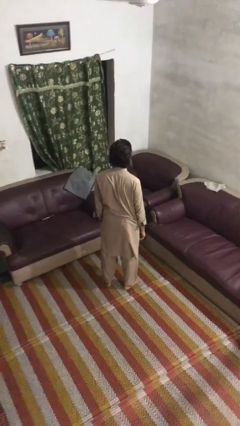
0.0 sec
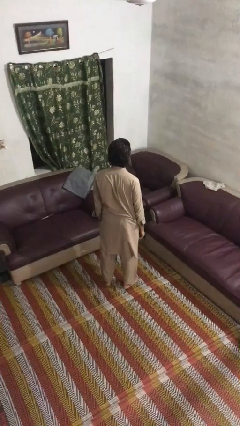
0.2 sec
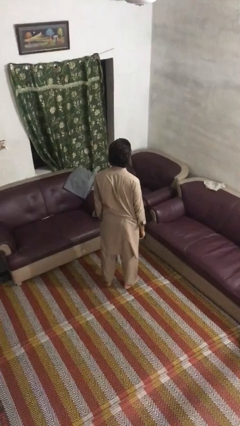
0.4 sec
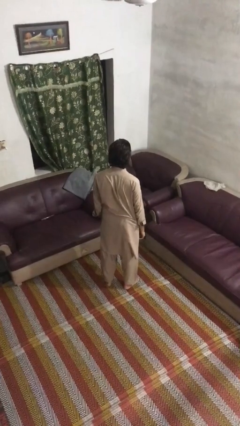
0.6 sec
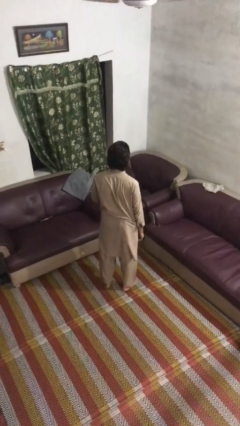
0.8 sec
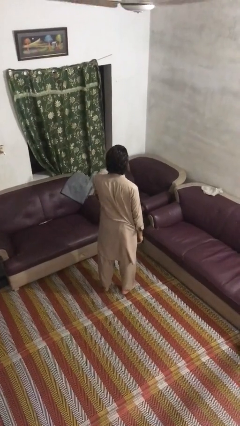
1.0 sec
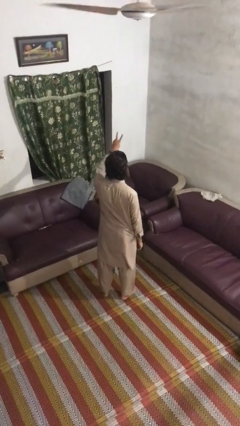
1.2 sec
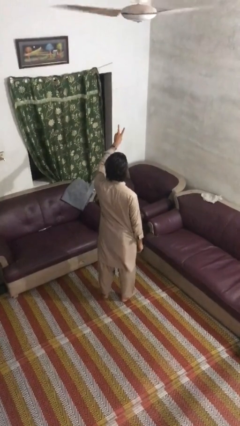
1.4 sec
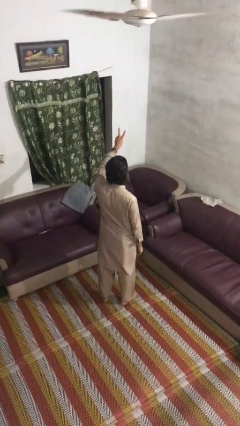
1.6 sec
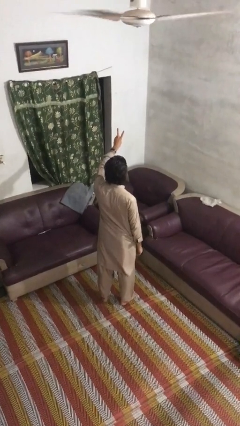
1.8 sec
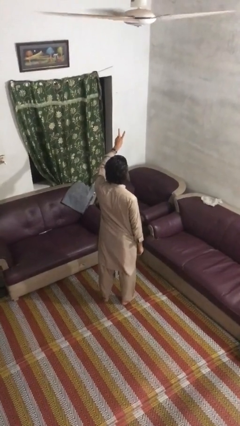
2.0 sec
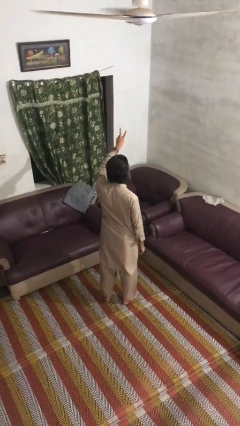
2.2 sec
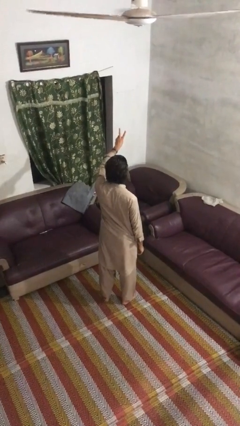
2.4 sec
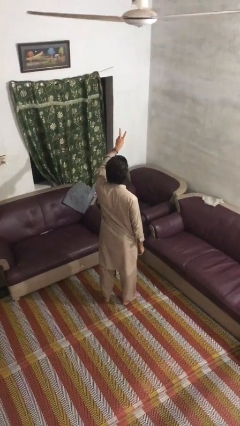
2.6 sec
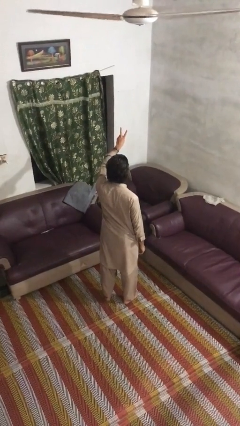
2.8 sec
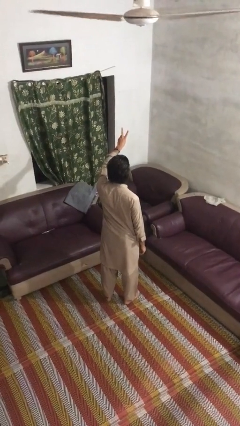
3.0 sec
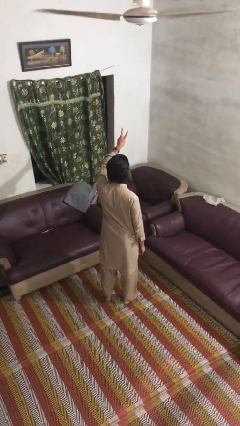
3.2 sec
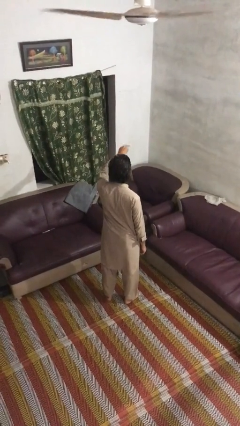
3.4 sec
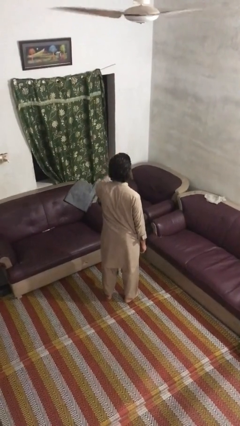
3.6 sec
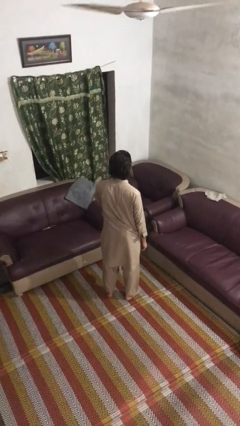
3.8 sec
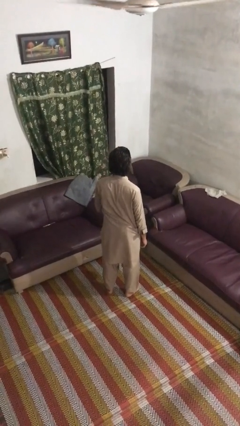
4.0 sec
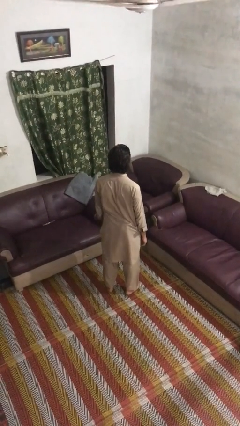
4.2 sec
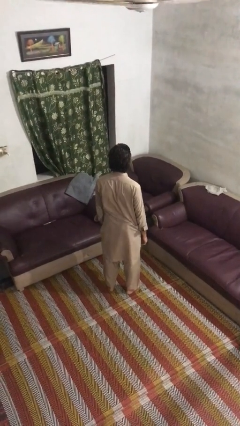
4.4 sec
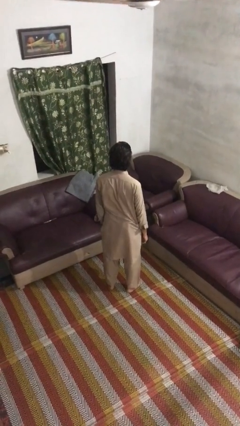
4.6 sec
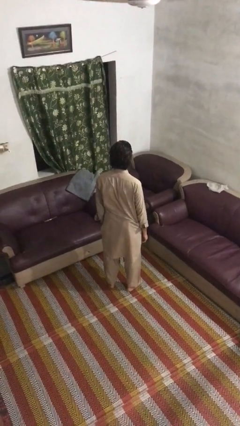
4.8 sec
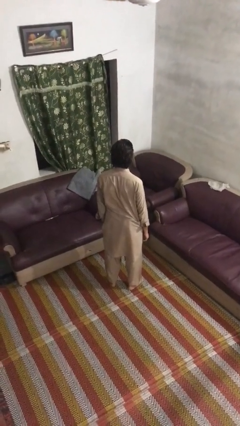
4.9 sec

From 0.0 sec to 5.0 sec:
person gestures peace

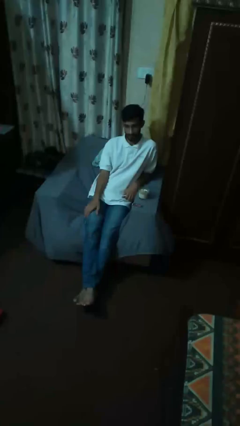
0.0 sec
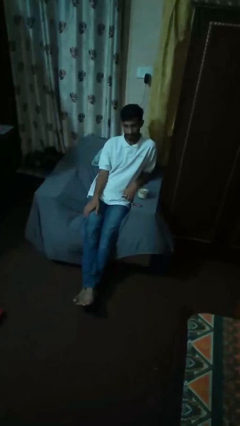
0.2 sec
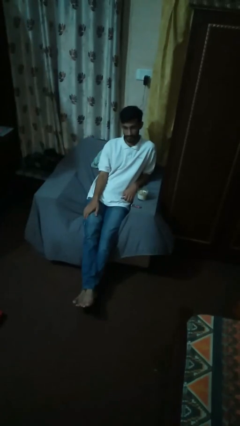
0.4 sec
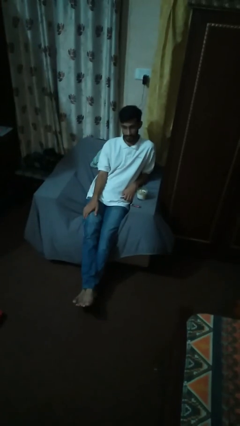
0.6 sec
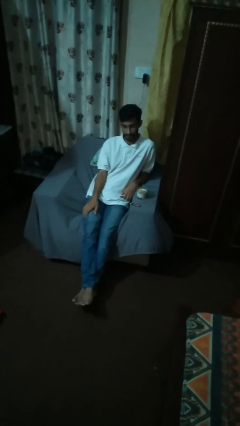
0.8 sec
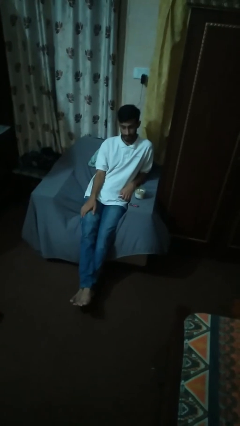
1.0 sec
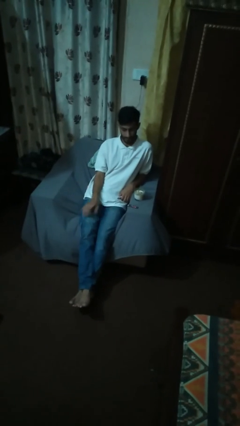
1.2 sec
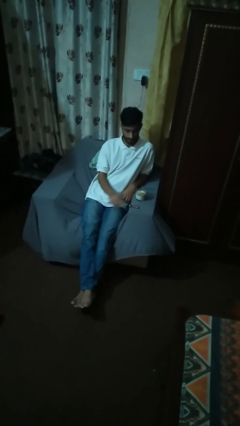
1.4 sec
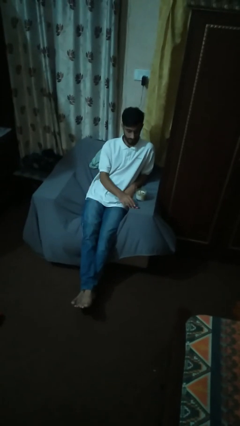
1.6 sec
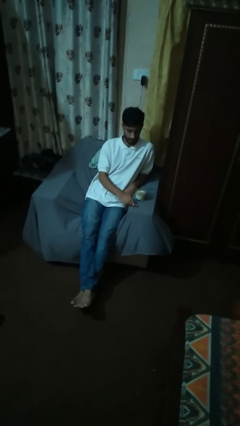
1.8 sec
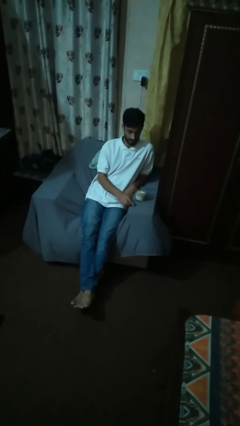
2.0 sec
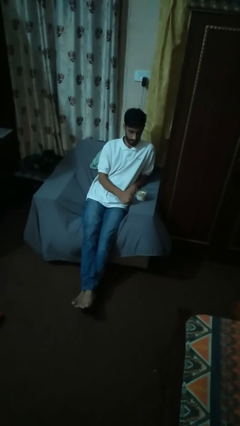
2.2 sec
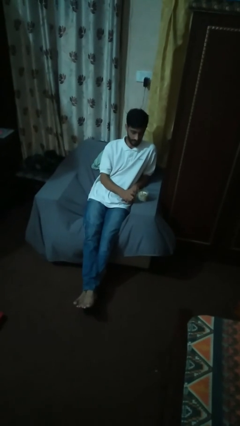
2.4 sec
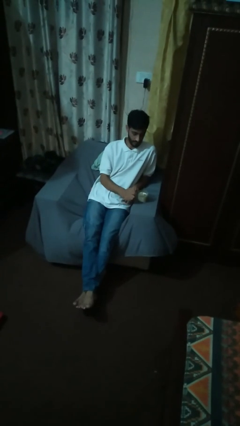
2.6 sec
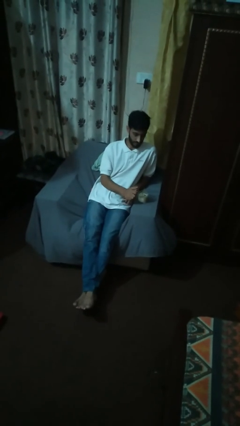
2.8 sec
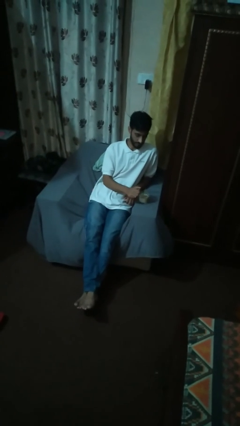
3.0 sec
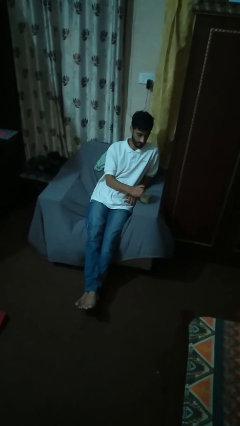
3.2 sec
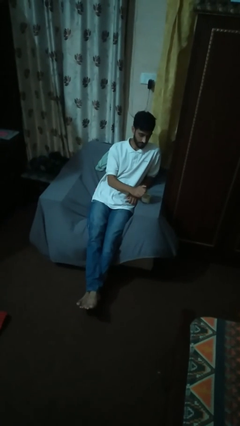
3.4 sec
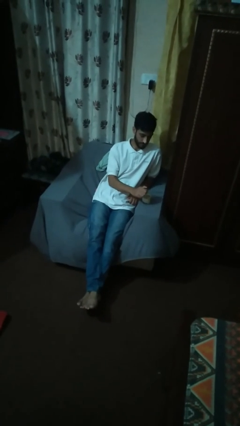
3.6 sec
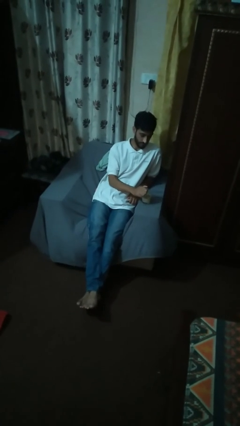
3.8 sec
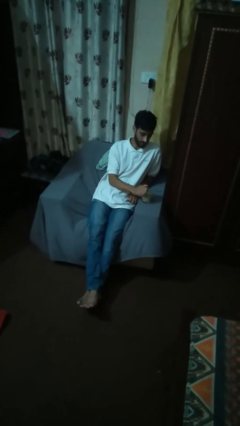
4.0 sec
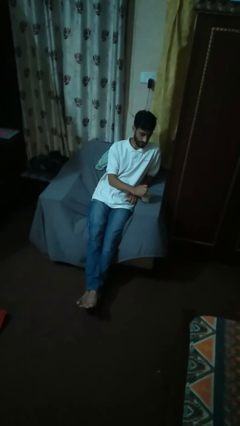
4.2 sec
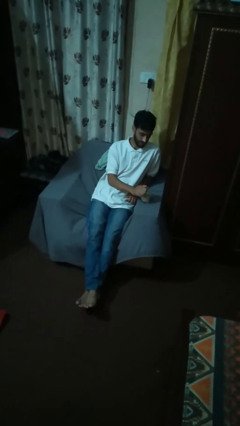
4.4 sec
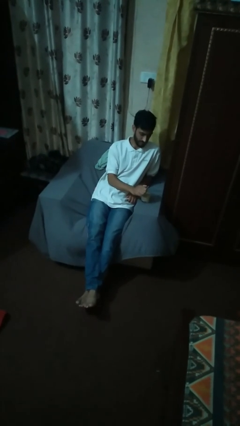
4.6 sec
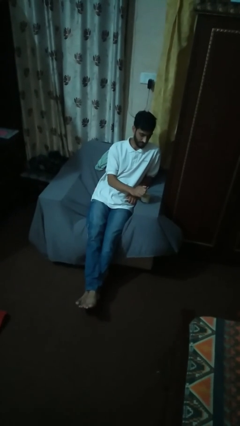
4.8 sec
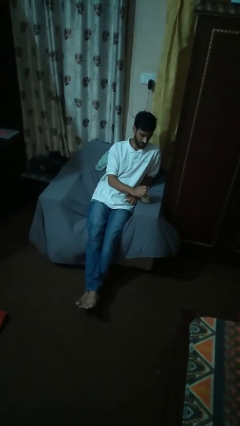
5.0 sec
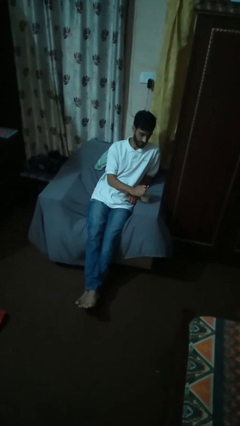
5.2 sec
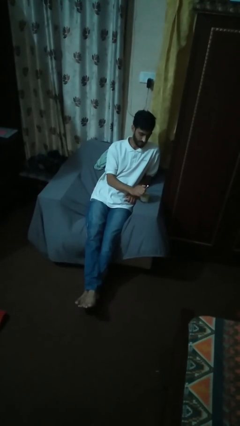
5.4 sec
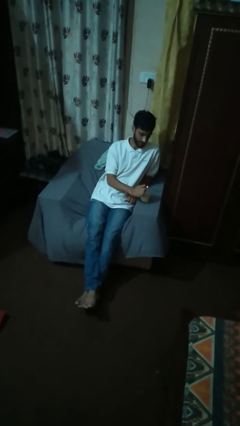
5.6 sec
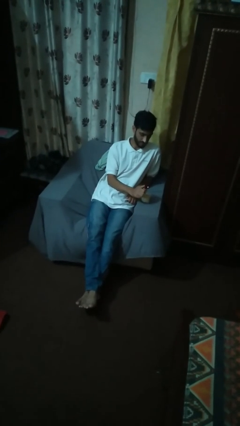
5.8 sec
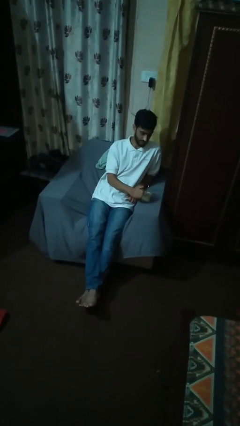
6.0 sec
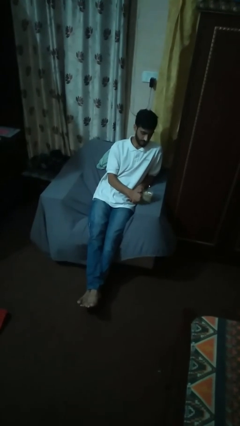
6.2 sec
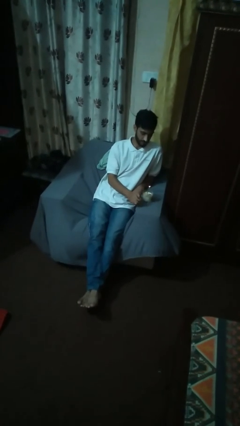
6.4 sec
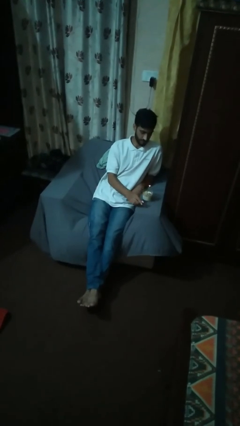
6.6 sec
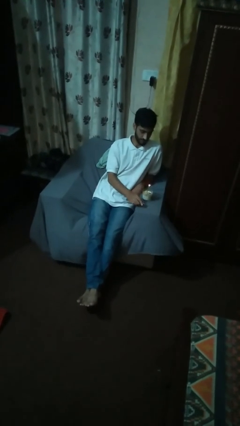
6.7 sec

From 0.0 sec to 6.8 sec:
person lights candle

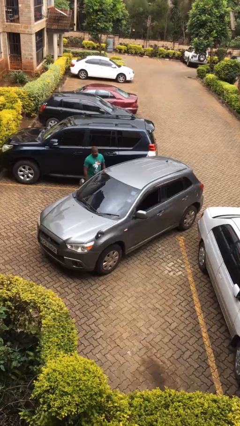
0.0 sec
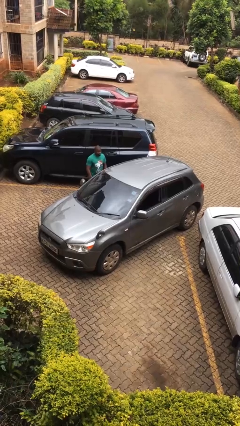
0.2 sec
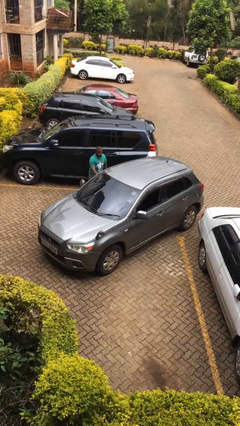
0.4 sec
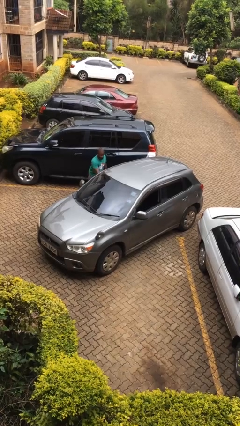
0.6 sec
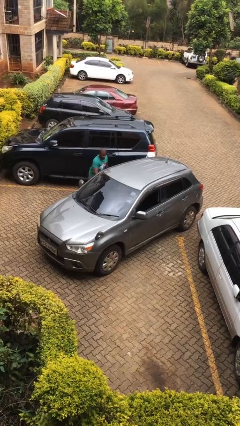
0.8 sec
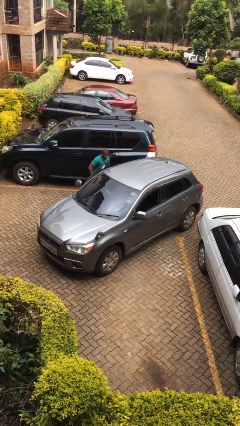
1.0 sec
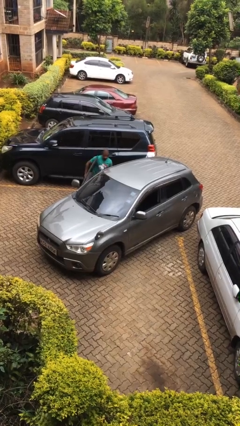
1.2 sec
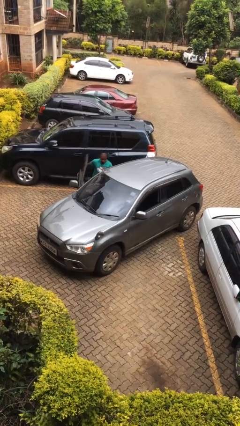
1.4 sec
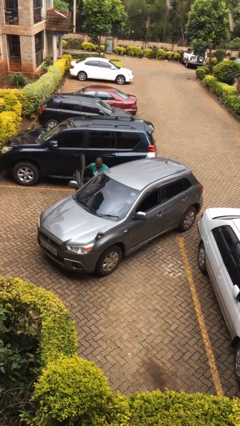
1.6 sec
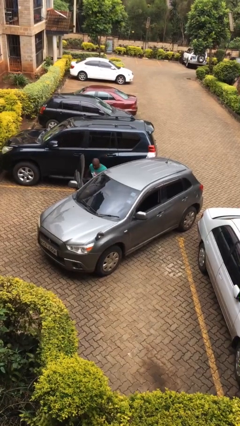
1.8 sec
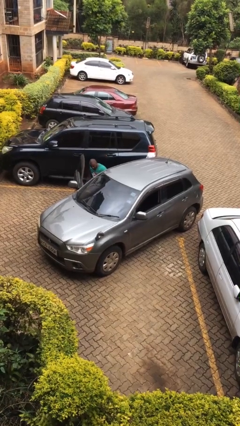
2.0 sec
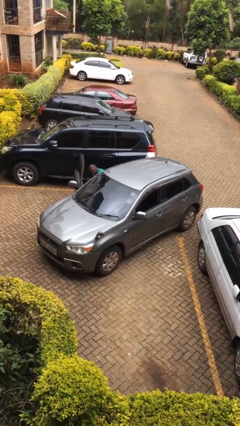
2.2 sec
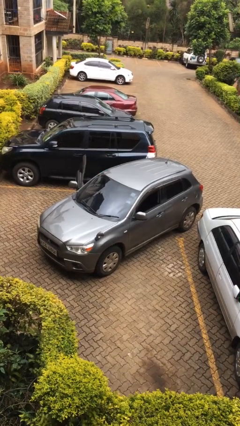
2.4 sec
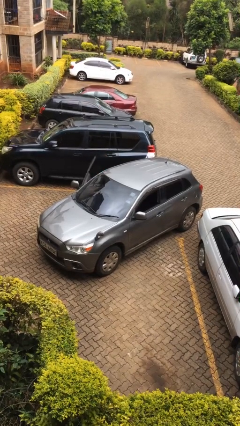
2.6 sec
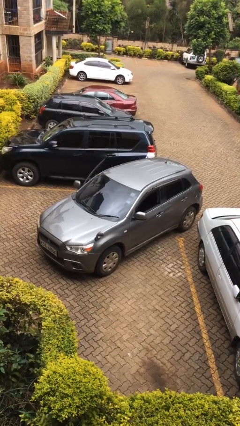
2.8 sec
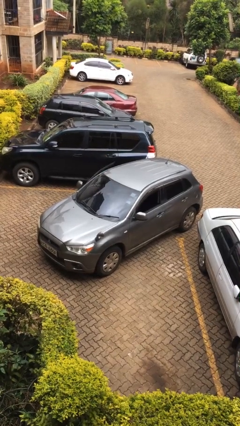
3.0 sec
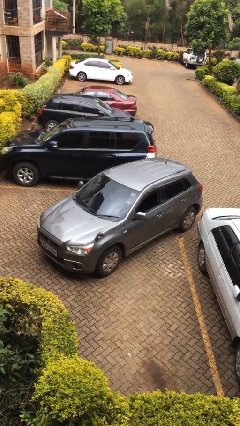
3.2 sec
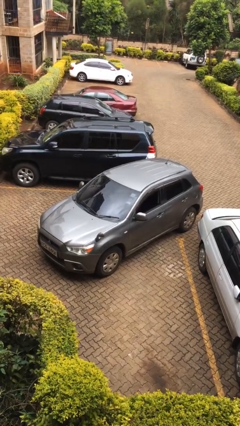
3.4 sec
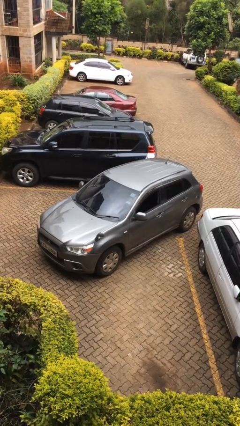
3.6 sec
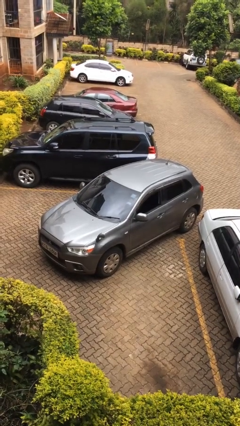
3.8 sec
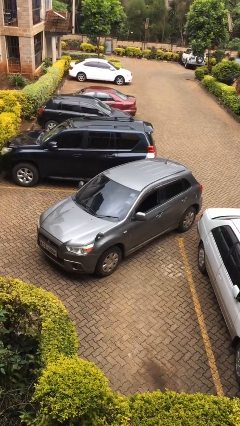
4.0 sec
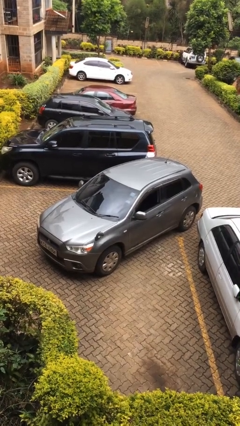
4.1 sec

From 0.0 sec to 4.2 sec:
car picks up person

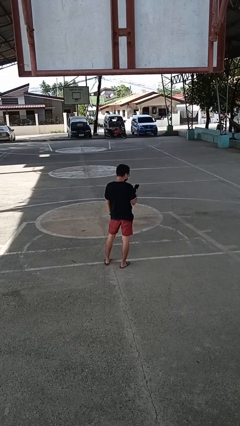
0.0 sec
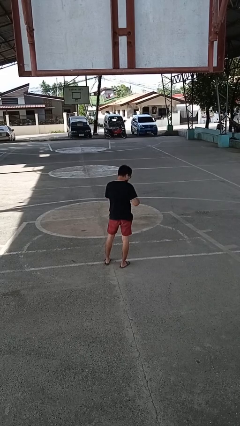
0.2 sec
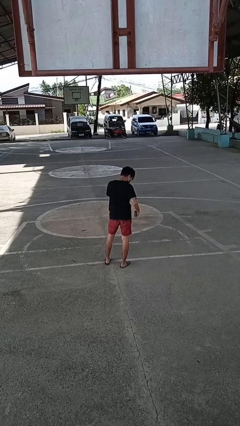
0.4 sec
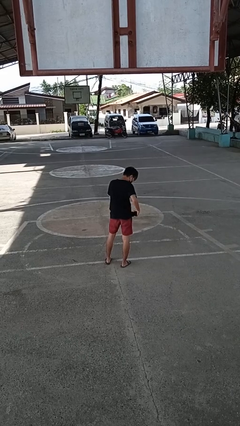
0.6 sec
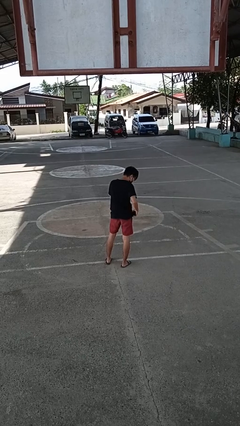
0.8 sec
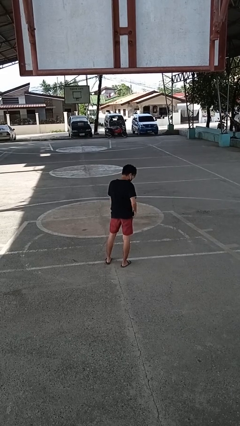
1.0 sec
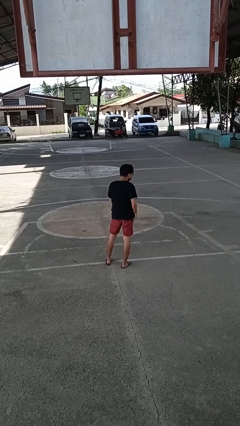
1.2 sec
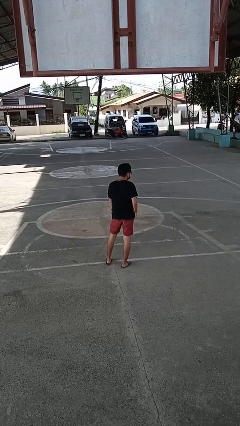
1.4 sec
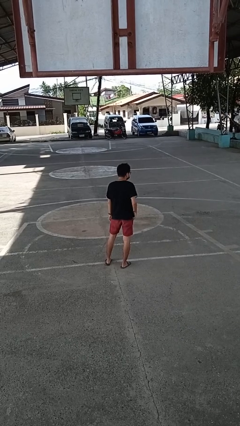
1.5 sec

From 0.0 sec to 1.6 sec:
person puts phone into pocket

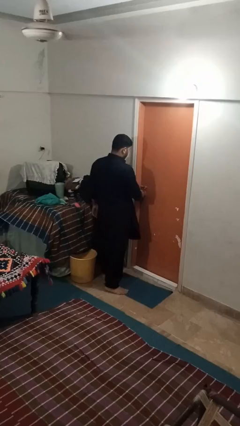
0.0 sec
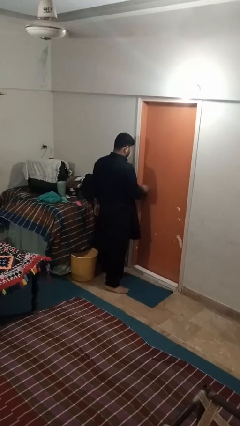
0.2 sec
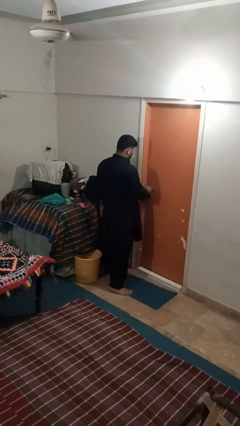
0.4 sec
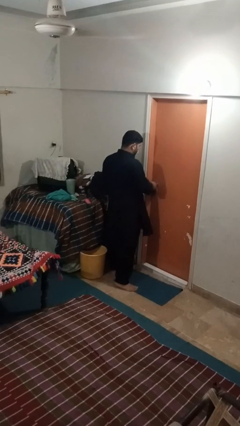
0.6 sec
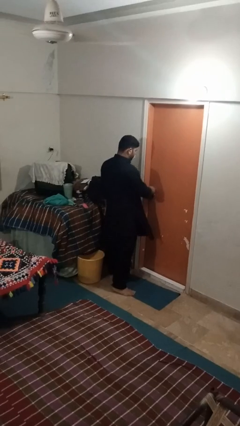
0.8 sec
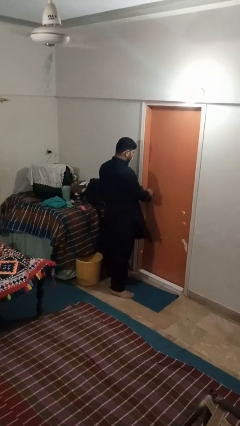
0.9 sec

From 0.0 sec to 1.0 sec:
person locks door with keys
